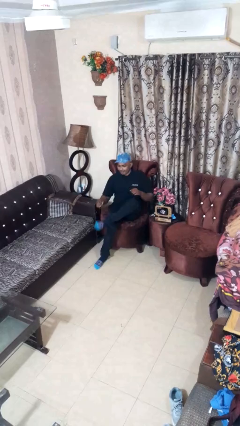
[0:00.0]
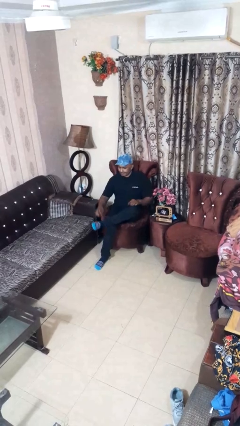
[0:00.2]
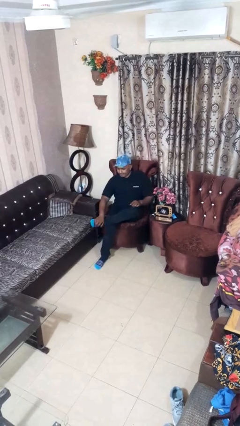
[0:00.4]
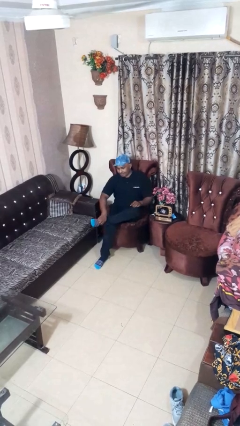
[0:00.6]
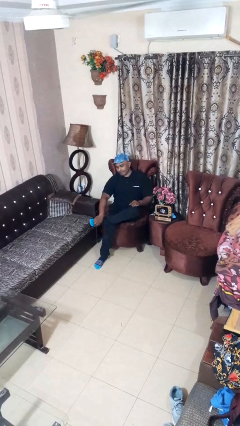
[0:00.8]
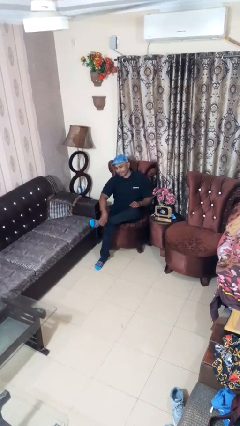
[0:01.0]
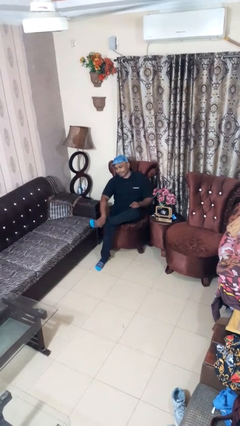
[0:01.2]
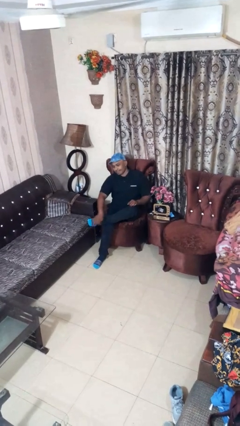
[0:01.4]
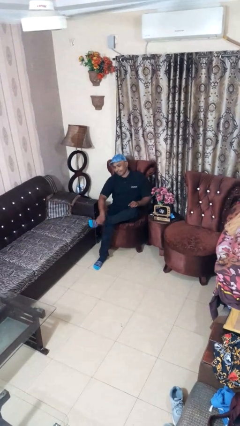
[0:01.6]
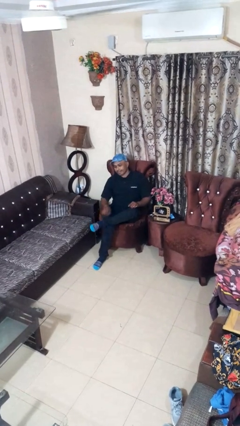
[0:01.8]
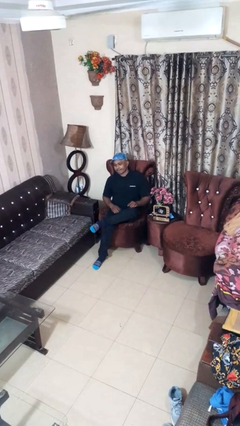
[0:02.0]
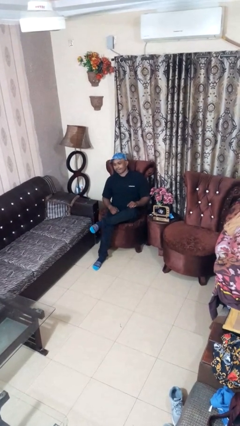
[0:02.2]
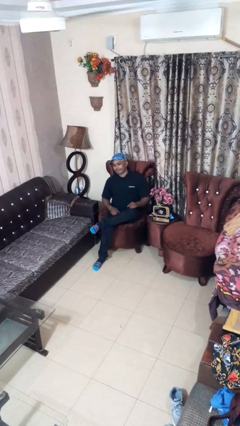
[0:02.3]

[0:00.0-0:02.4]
person rubs foot

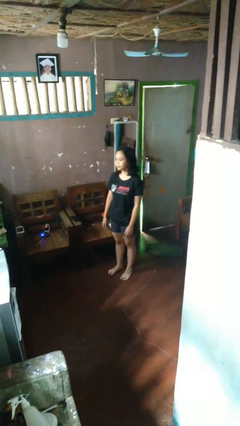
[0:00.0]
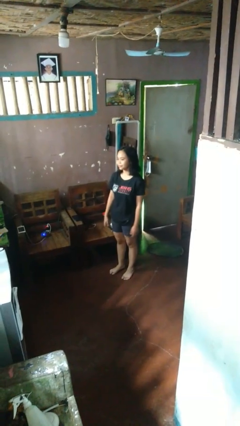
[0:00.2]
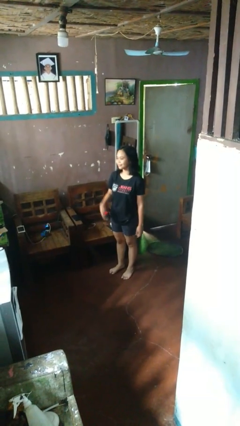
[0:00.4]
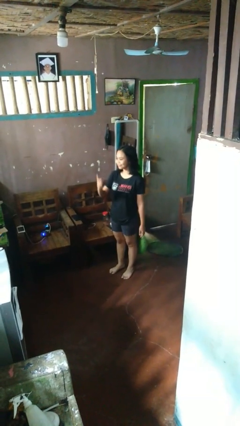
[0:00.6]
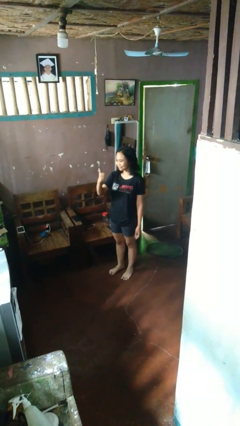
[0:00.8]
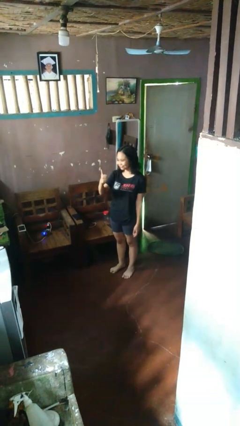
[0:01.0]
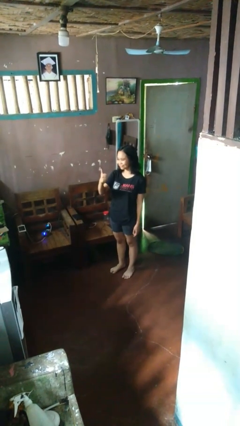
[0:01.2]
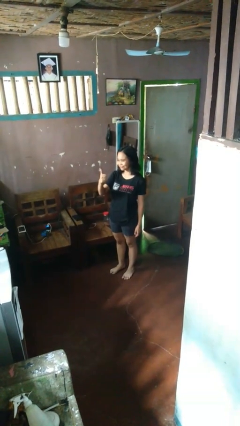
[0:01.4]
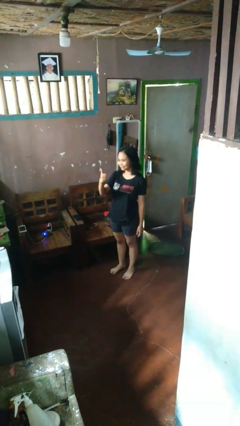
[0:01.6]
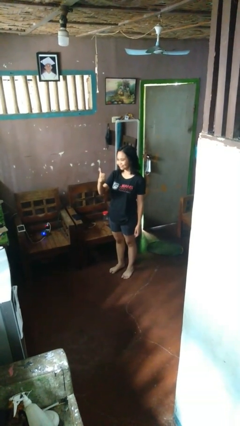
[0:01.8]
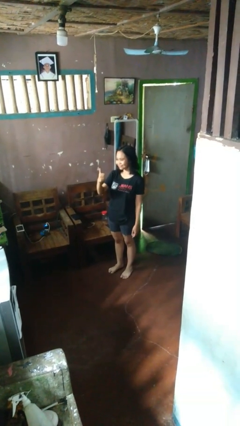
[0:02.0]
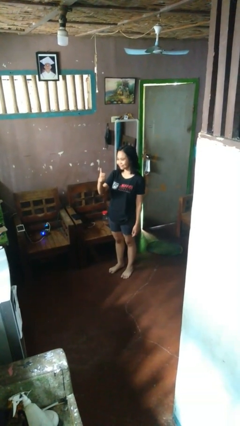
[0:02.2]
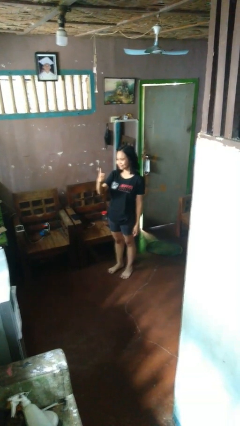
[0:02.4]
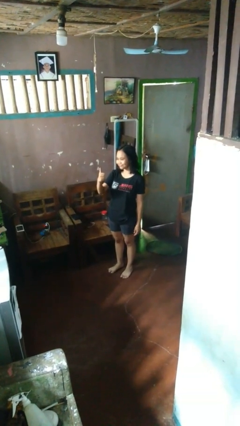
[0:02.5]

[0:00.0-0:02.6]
person gestures thumbs up

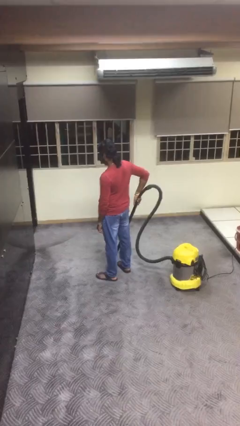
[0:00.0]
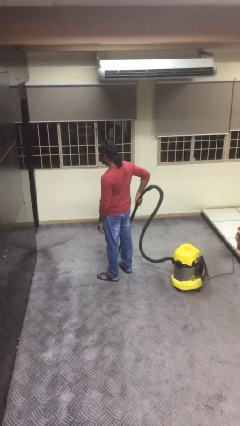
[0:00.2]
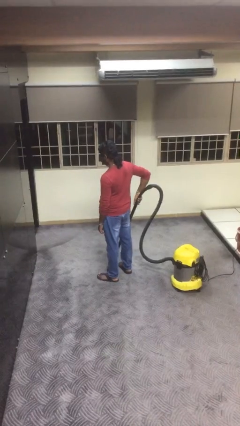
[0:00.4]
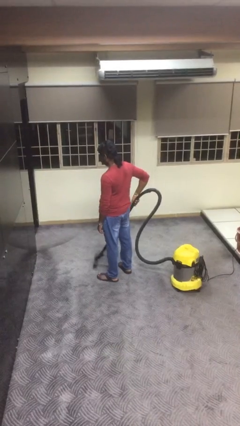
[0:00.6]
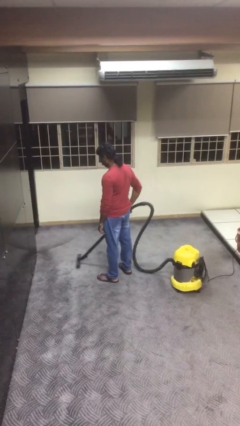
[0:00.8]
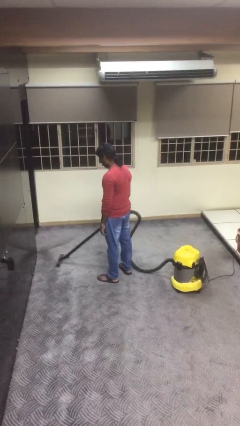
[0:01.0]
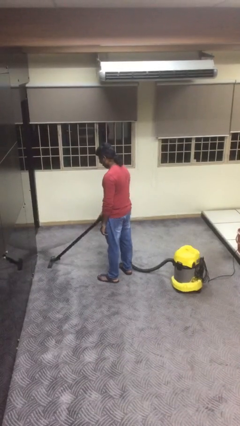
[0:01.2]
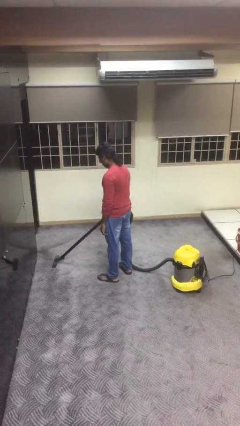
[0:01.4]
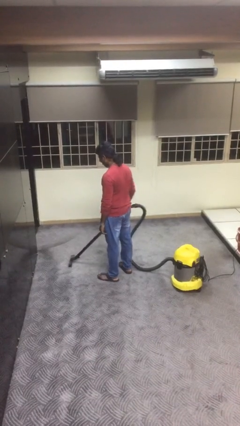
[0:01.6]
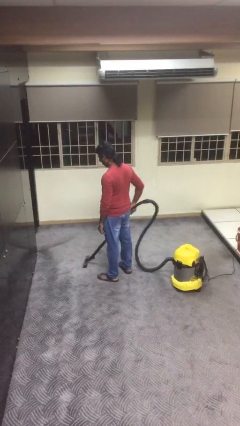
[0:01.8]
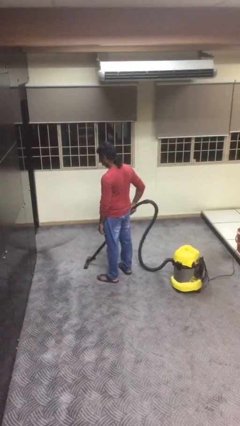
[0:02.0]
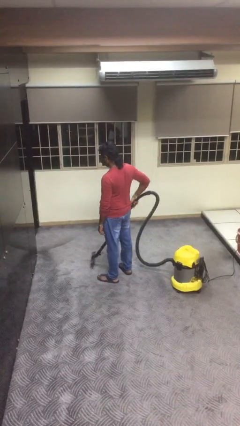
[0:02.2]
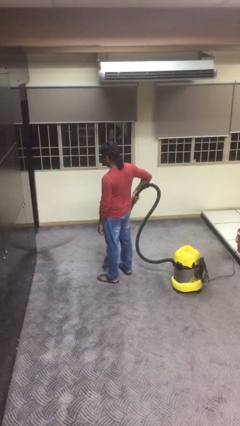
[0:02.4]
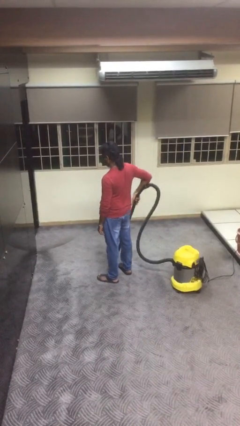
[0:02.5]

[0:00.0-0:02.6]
person vacuums carpet

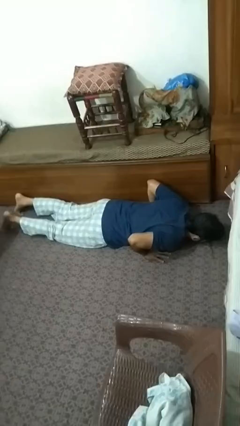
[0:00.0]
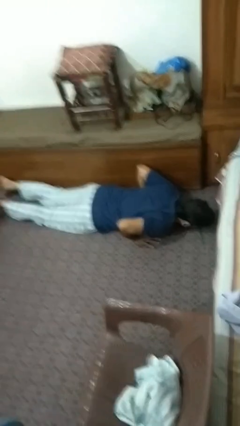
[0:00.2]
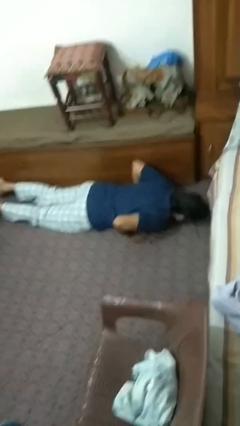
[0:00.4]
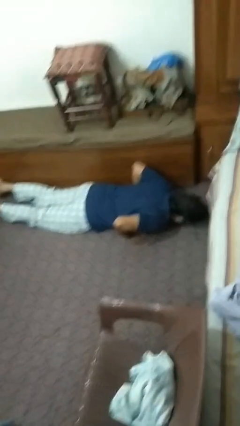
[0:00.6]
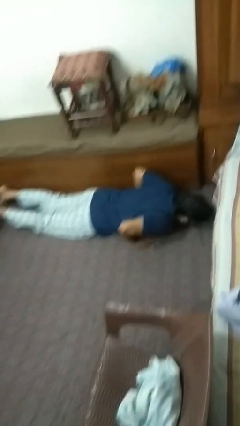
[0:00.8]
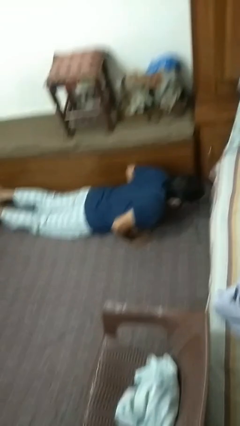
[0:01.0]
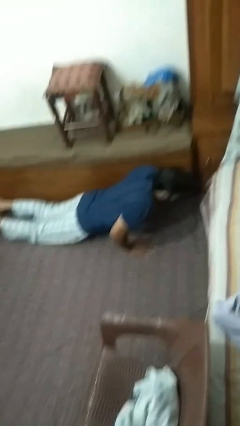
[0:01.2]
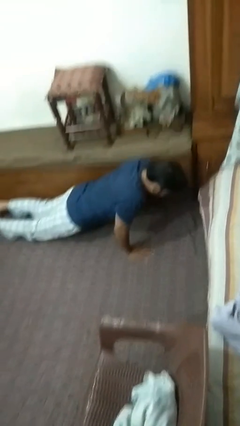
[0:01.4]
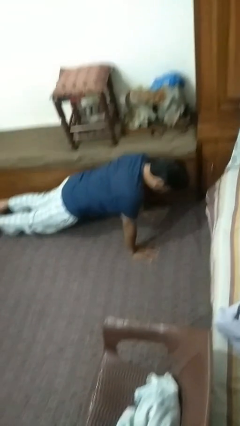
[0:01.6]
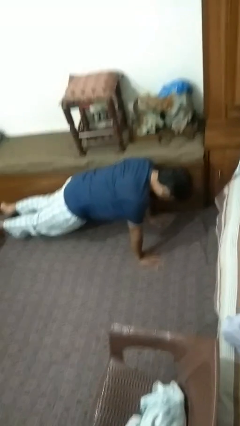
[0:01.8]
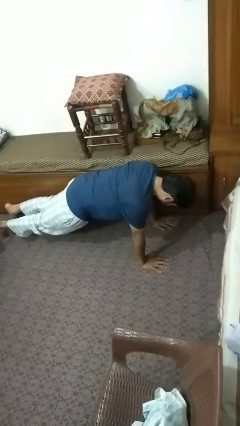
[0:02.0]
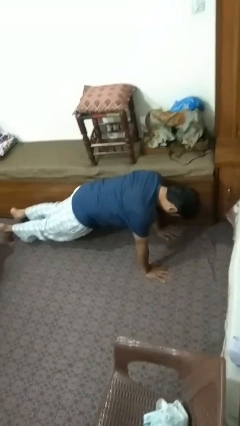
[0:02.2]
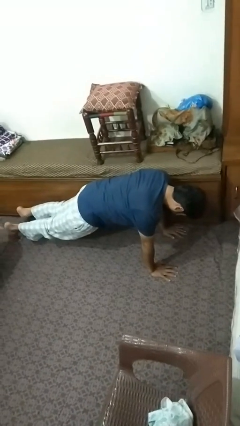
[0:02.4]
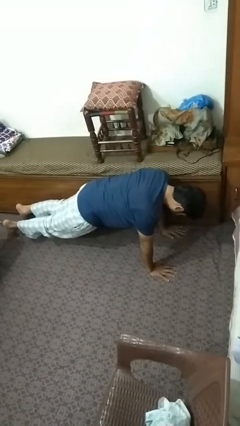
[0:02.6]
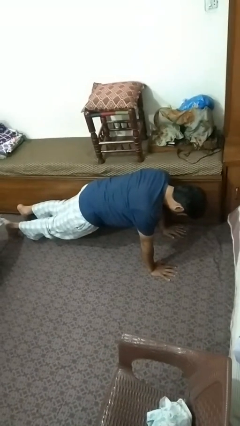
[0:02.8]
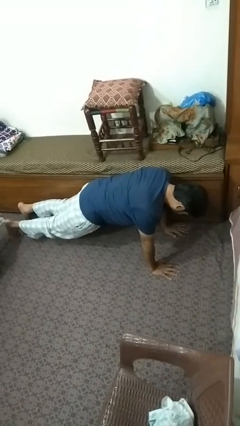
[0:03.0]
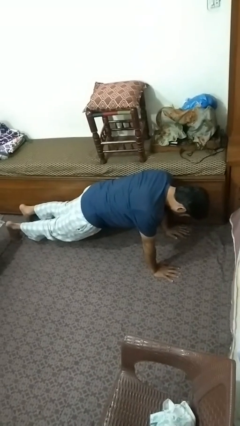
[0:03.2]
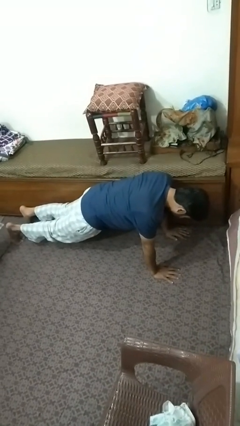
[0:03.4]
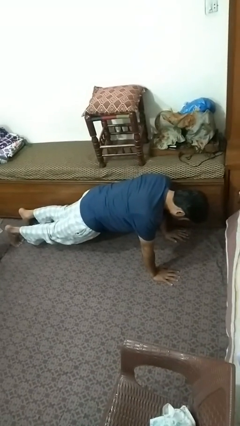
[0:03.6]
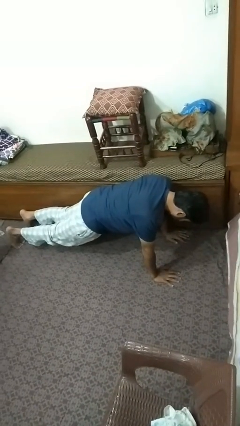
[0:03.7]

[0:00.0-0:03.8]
person exercises with pushup

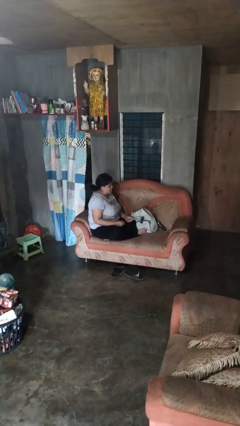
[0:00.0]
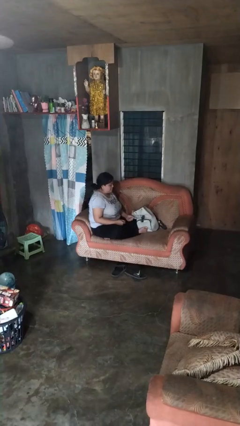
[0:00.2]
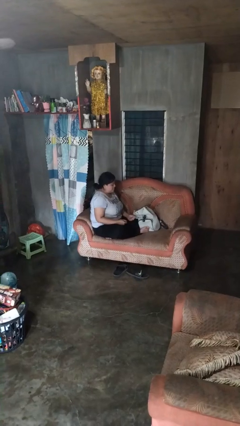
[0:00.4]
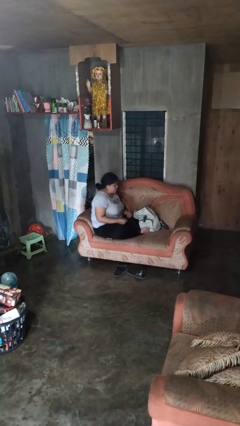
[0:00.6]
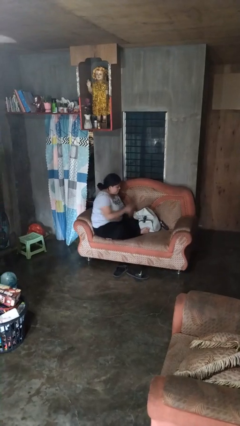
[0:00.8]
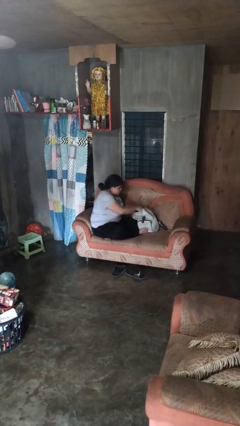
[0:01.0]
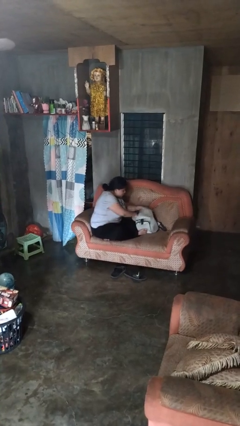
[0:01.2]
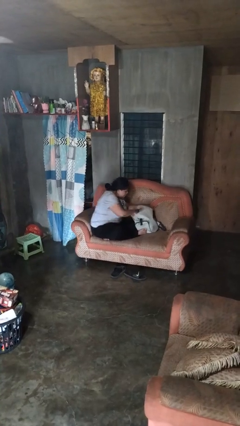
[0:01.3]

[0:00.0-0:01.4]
person searches in backpack

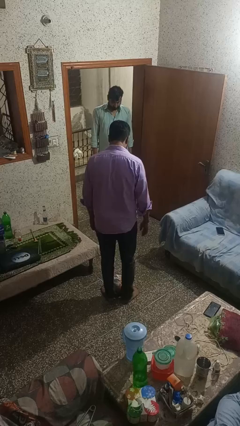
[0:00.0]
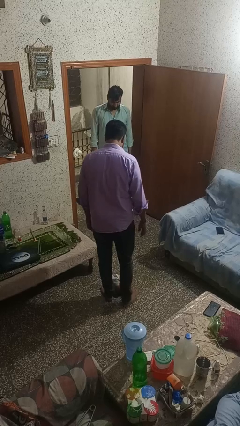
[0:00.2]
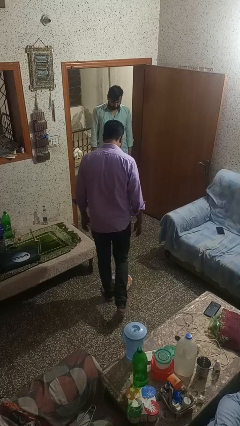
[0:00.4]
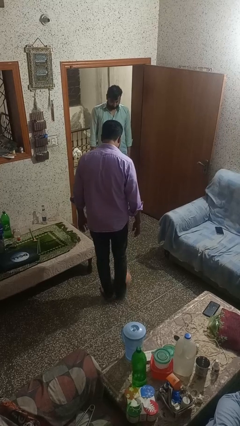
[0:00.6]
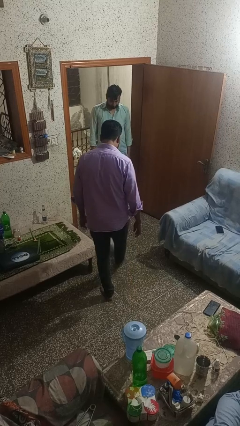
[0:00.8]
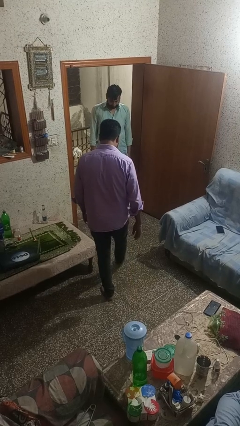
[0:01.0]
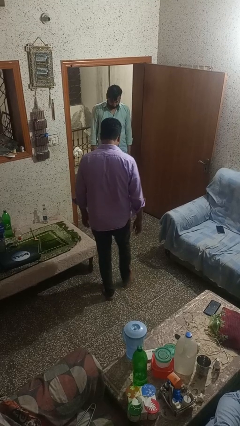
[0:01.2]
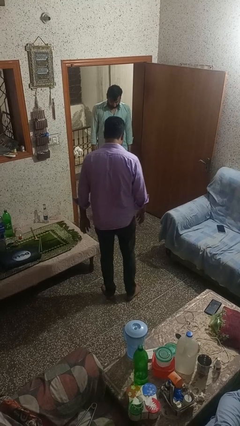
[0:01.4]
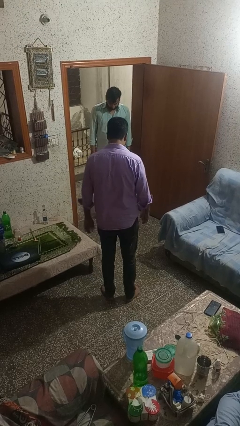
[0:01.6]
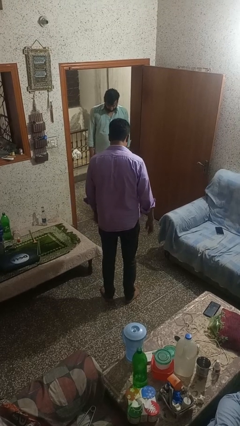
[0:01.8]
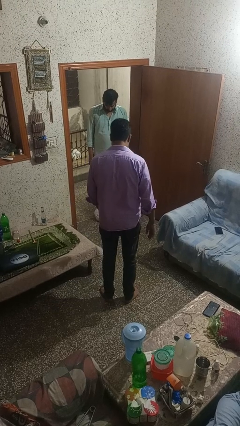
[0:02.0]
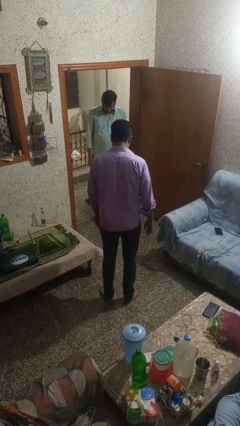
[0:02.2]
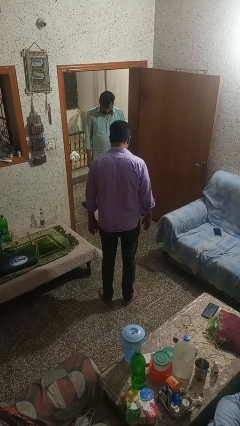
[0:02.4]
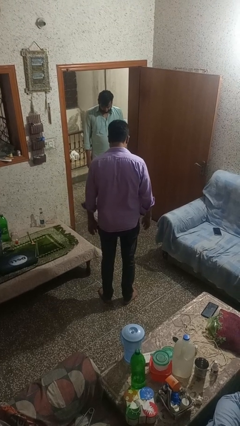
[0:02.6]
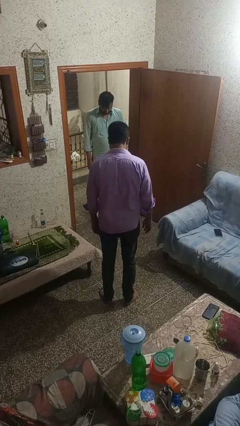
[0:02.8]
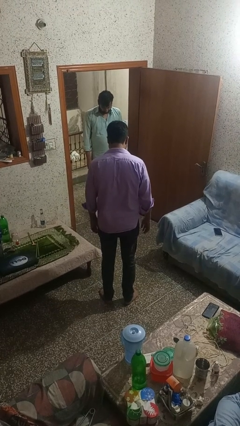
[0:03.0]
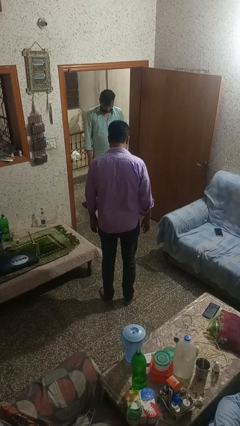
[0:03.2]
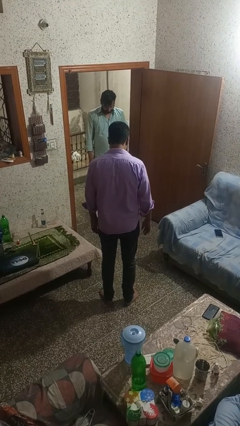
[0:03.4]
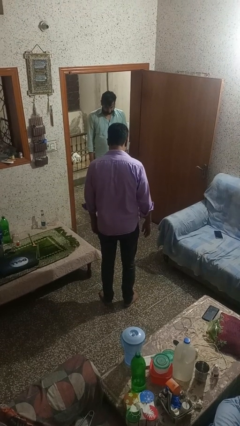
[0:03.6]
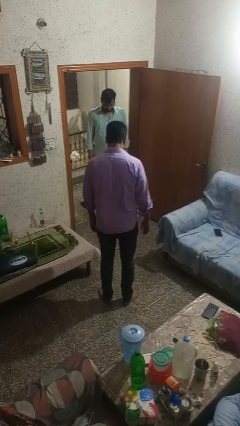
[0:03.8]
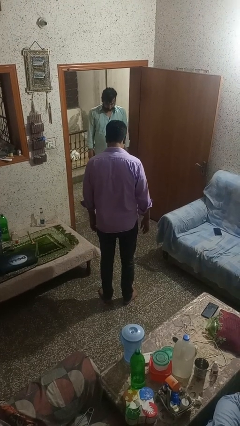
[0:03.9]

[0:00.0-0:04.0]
person kicks object to person

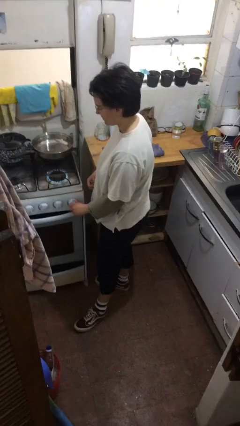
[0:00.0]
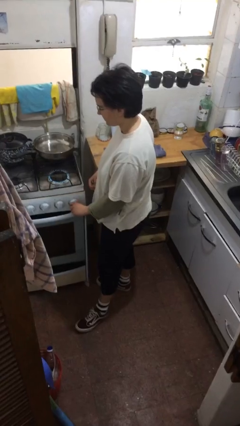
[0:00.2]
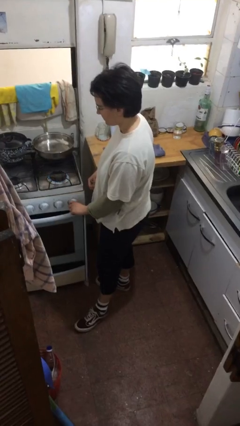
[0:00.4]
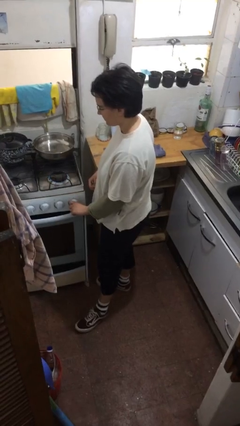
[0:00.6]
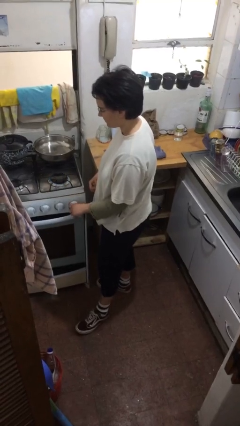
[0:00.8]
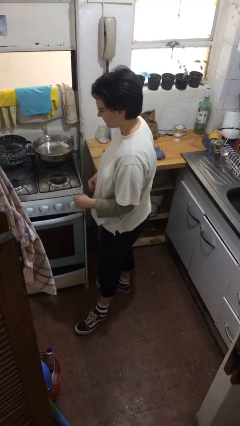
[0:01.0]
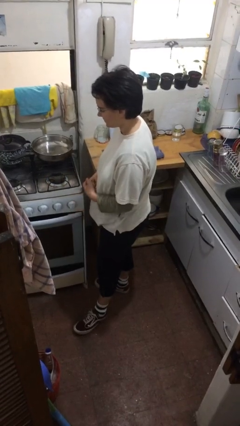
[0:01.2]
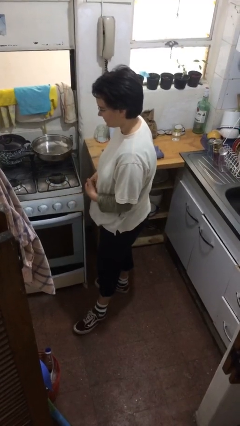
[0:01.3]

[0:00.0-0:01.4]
person turns off stovetop
